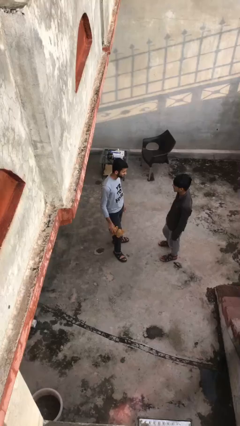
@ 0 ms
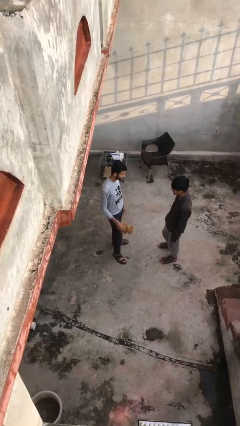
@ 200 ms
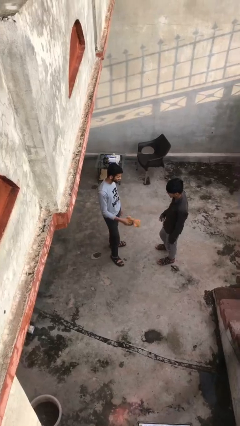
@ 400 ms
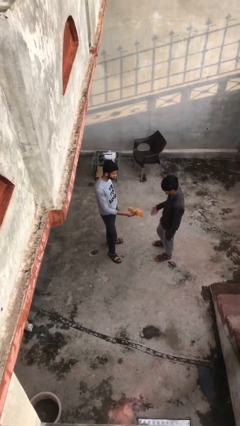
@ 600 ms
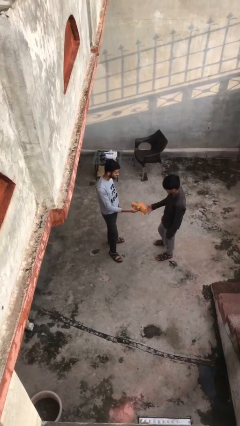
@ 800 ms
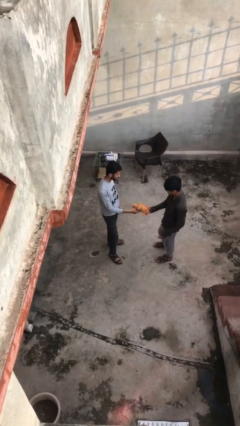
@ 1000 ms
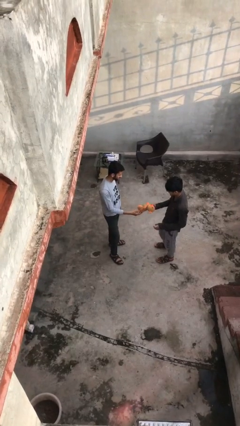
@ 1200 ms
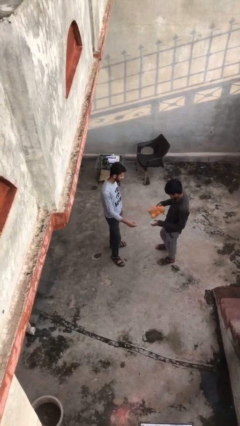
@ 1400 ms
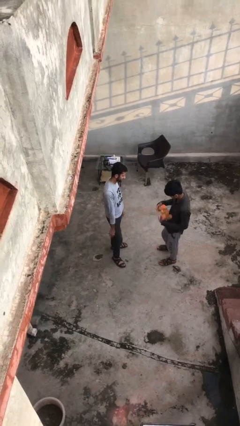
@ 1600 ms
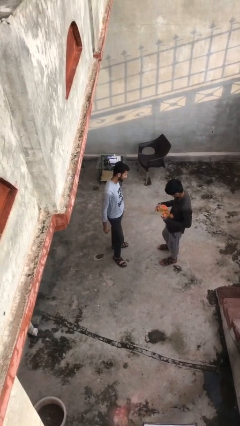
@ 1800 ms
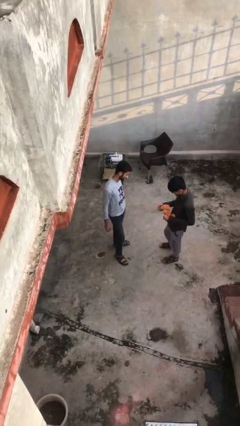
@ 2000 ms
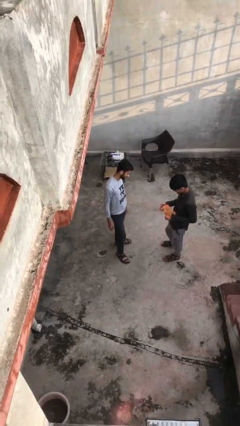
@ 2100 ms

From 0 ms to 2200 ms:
person transfers object to person

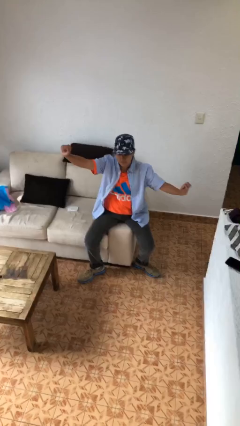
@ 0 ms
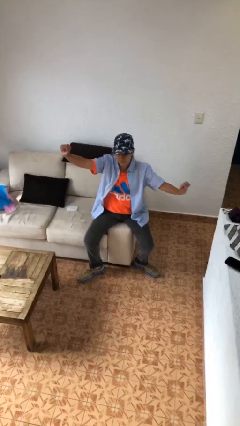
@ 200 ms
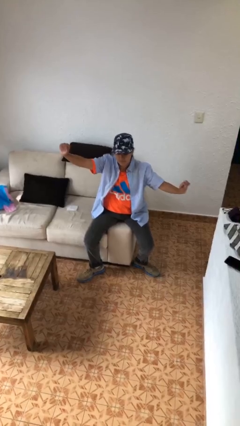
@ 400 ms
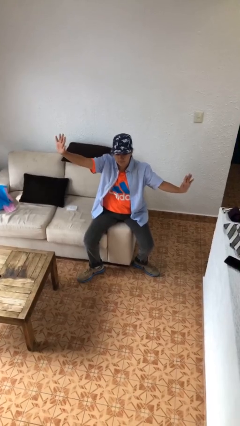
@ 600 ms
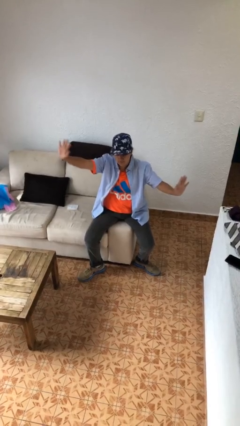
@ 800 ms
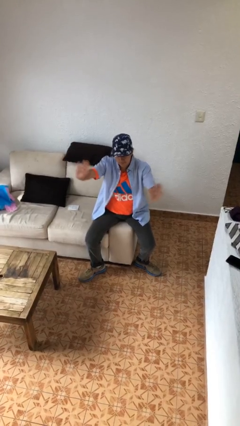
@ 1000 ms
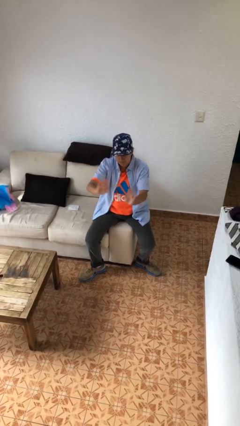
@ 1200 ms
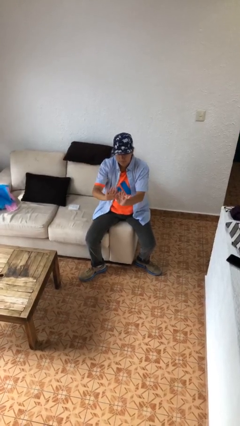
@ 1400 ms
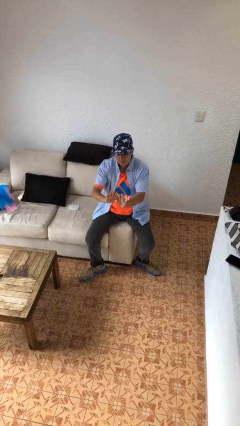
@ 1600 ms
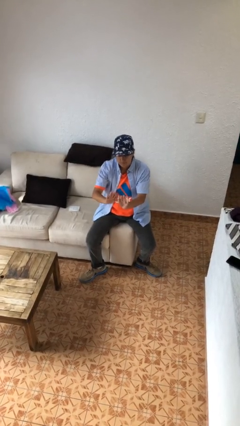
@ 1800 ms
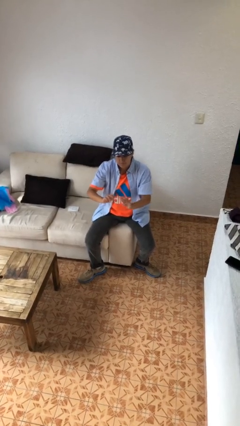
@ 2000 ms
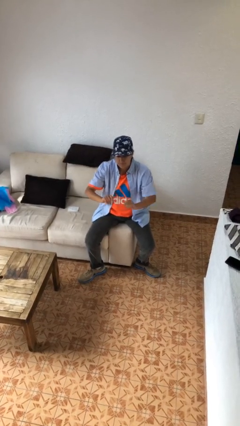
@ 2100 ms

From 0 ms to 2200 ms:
person gestures zoom out

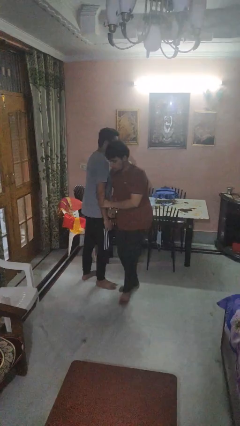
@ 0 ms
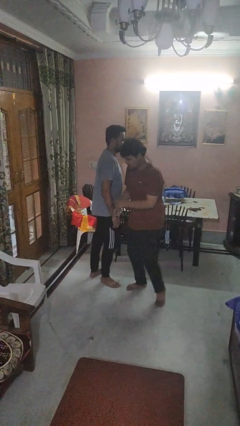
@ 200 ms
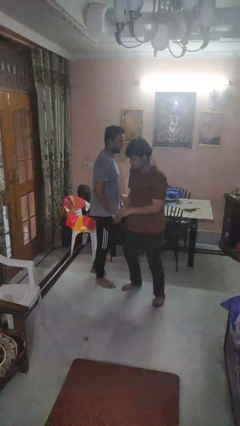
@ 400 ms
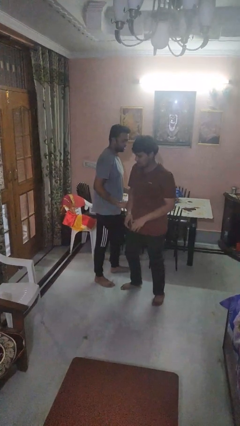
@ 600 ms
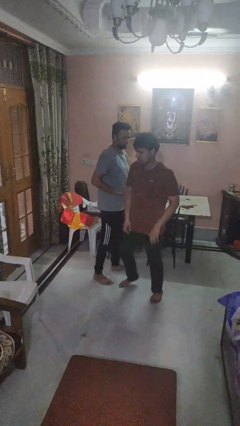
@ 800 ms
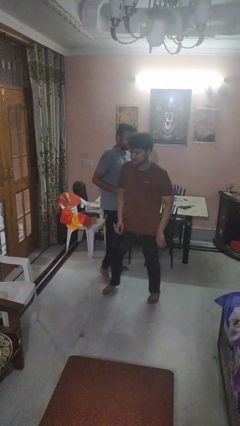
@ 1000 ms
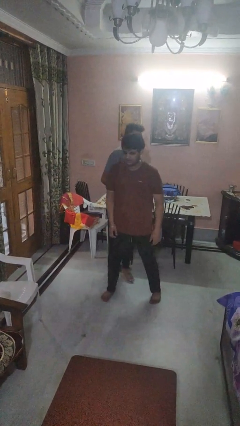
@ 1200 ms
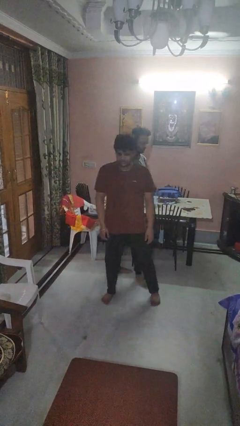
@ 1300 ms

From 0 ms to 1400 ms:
person bumps into person

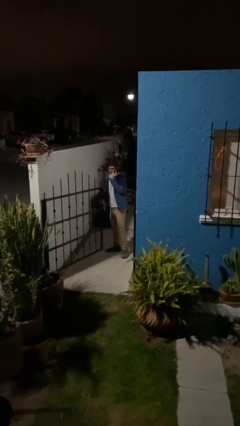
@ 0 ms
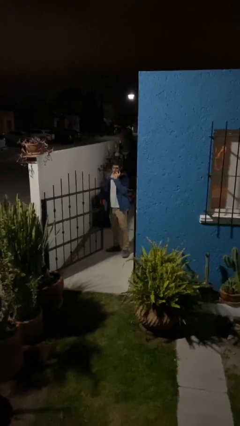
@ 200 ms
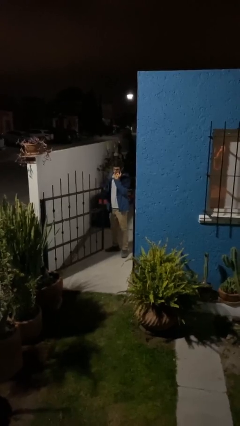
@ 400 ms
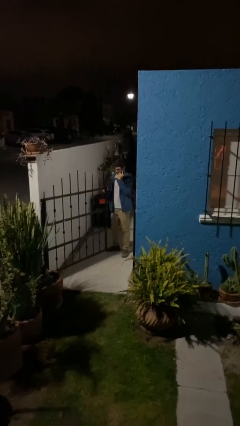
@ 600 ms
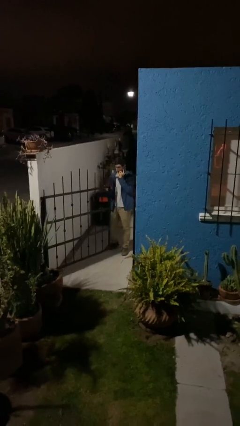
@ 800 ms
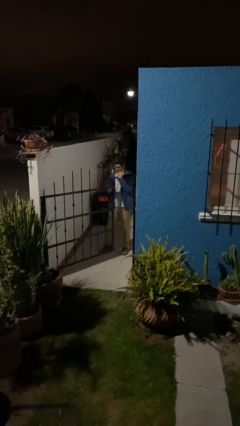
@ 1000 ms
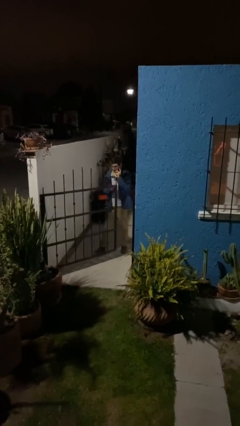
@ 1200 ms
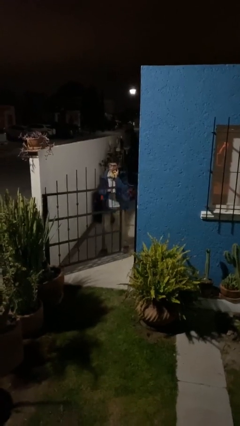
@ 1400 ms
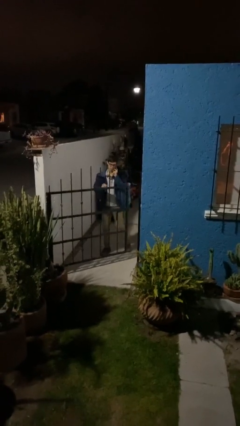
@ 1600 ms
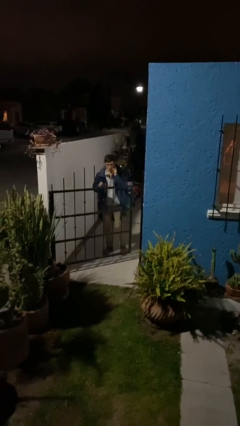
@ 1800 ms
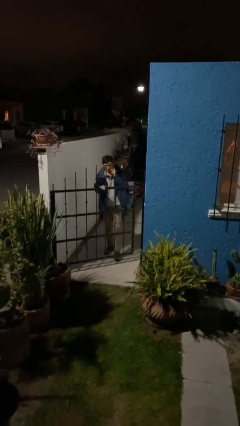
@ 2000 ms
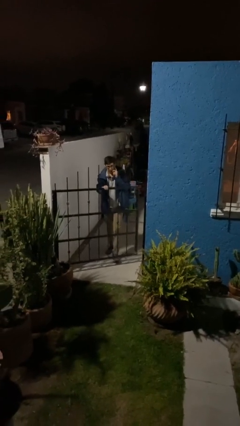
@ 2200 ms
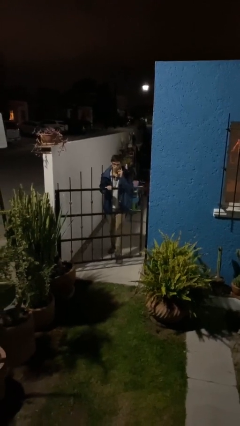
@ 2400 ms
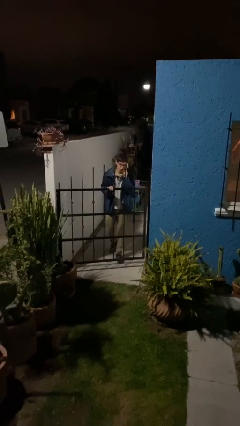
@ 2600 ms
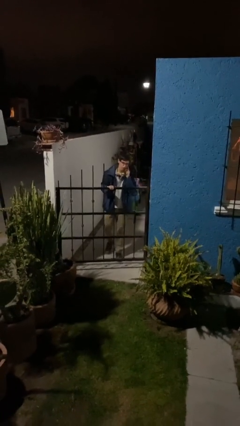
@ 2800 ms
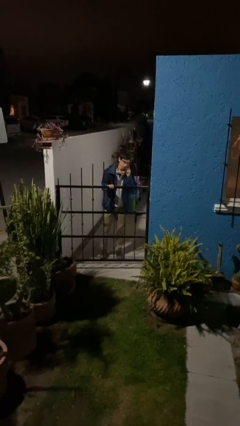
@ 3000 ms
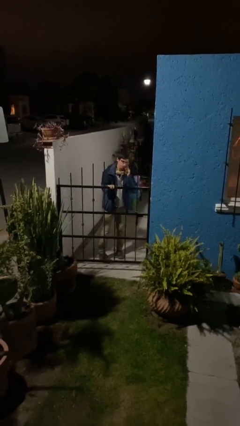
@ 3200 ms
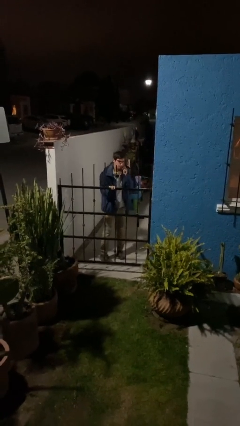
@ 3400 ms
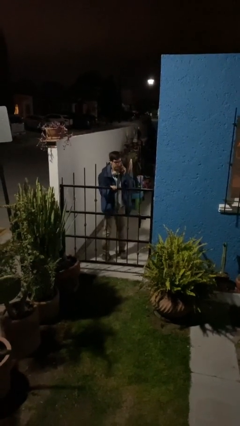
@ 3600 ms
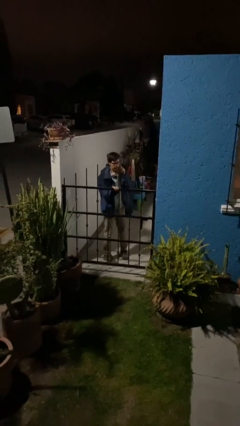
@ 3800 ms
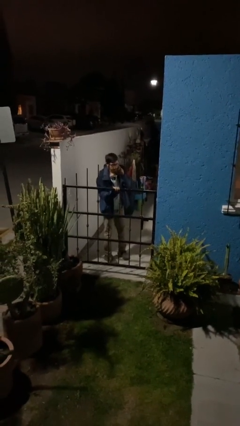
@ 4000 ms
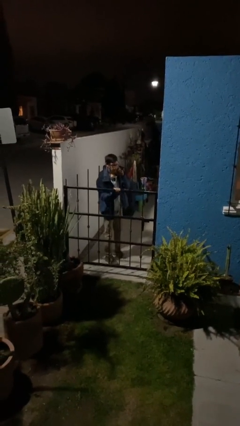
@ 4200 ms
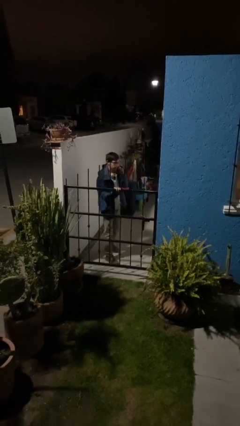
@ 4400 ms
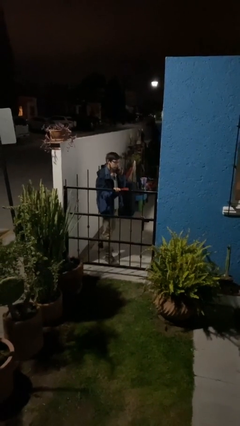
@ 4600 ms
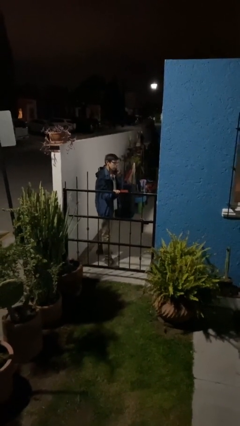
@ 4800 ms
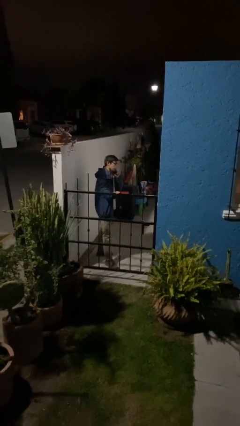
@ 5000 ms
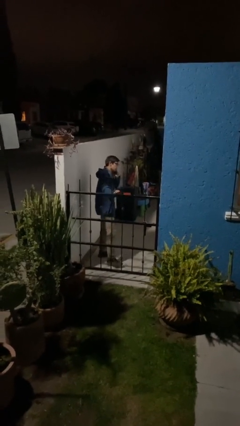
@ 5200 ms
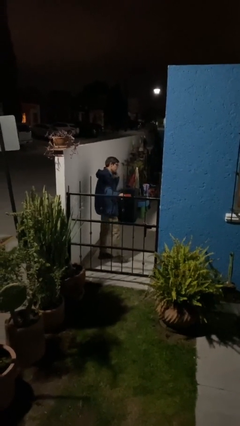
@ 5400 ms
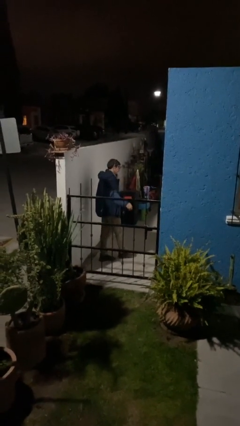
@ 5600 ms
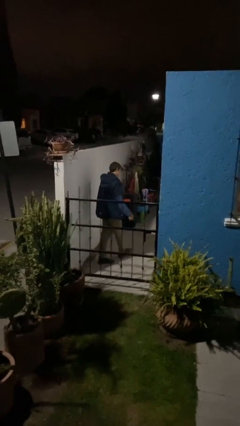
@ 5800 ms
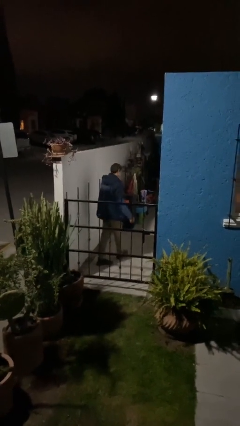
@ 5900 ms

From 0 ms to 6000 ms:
person closes facility door

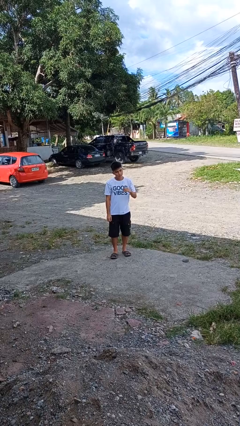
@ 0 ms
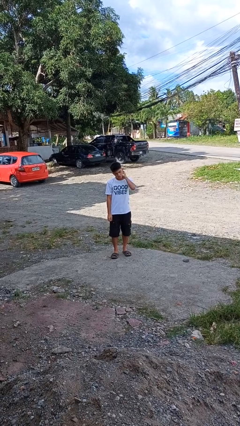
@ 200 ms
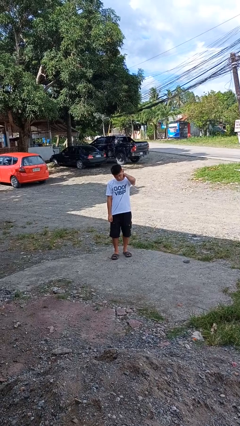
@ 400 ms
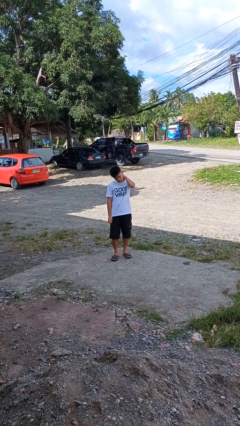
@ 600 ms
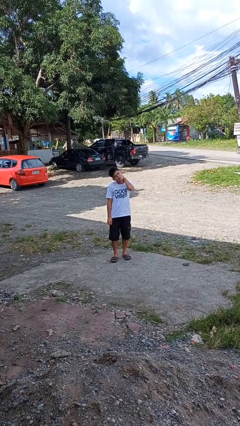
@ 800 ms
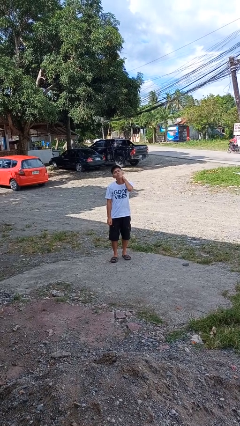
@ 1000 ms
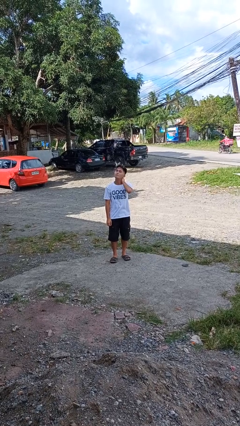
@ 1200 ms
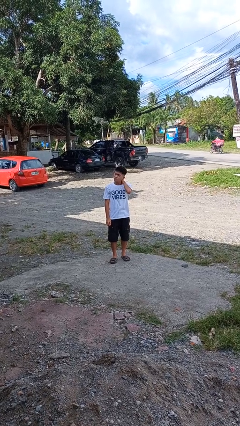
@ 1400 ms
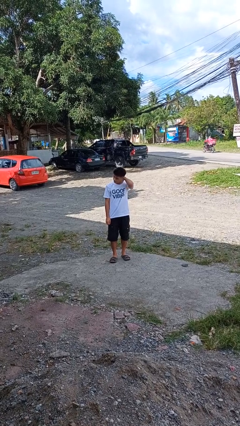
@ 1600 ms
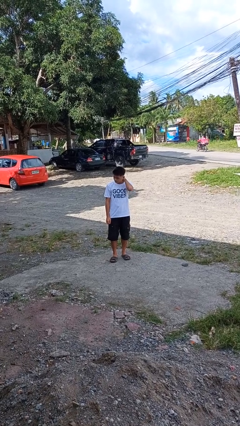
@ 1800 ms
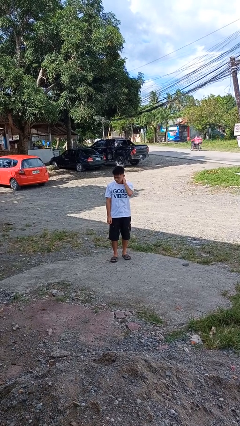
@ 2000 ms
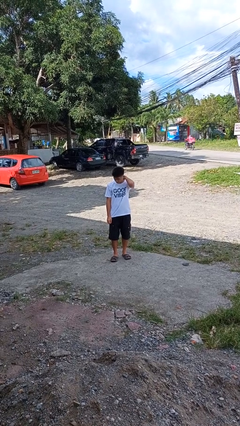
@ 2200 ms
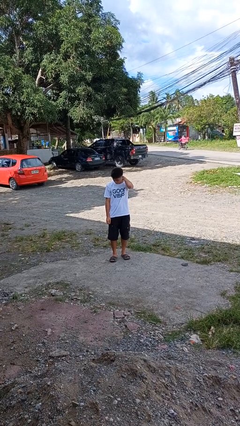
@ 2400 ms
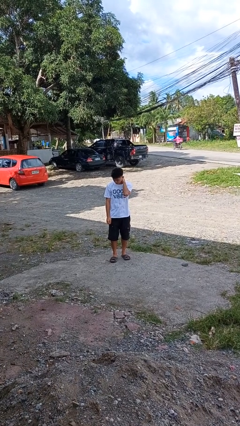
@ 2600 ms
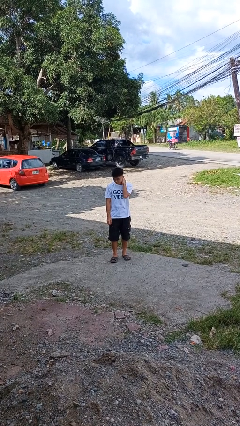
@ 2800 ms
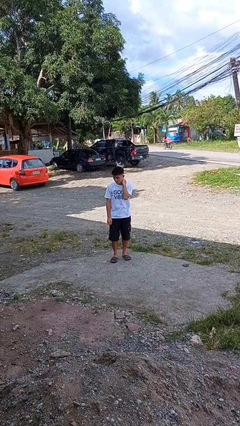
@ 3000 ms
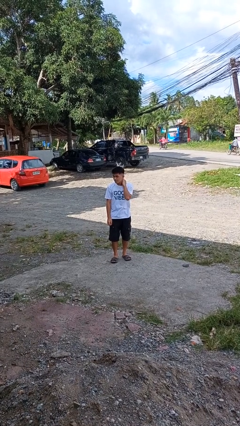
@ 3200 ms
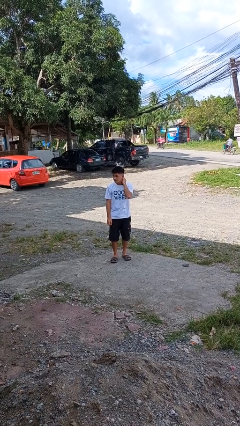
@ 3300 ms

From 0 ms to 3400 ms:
person rubs neck

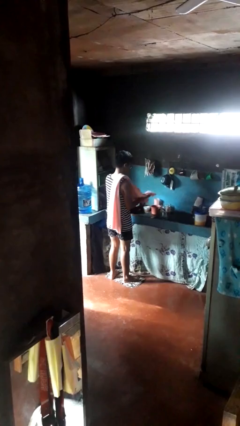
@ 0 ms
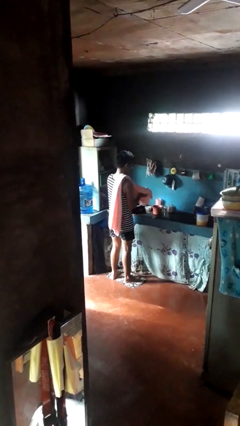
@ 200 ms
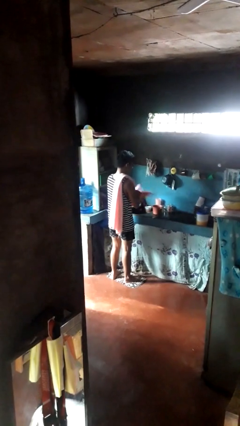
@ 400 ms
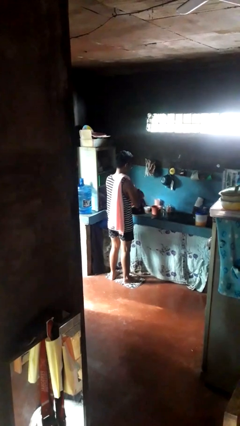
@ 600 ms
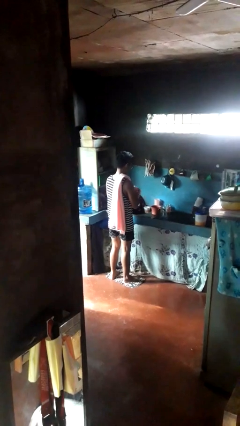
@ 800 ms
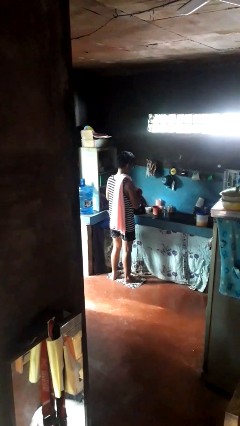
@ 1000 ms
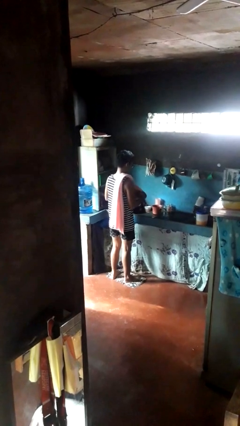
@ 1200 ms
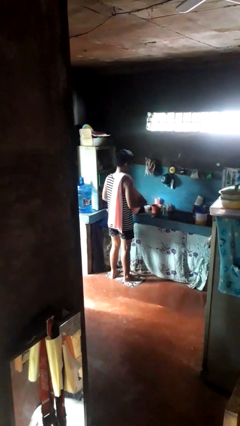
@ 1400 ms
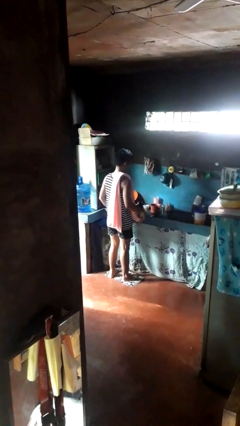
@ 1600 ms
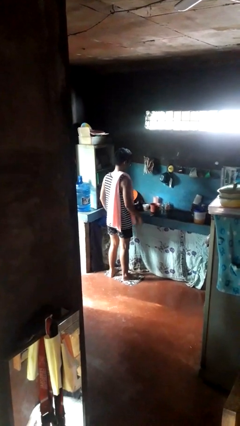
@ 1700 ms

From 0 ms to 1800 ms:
person dries hands with towel

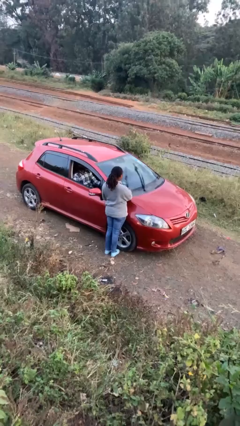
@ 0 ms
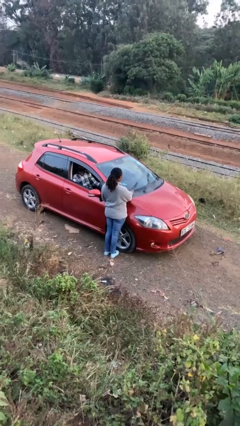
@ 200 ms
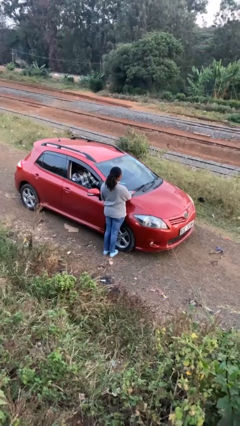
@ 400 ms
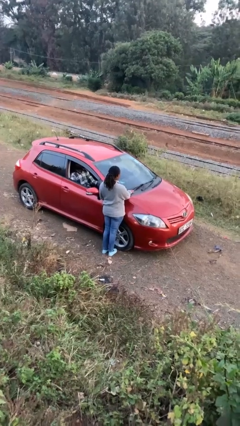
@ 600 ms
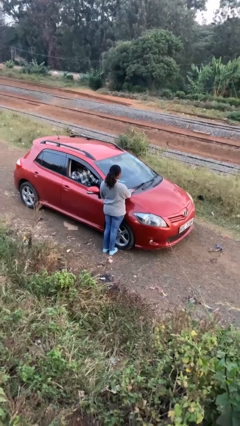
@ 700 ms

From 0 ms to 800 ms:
person flips down car wipers
